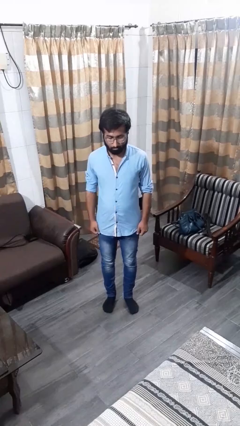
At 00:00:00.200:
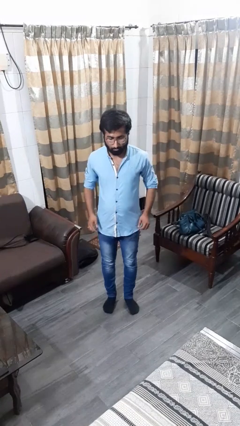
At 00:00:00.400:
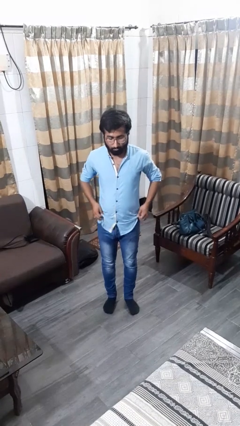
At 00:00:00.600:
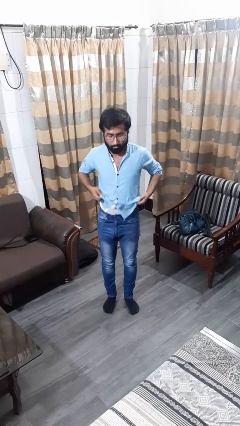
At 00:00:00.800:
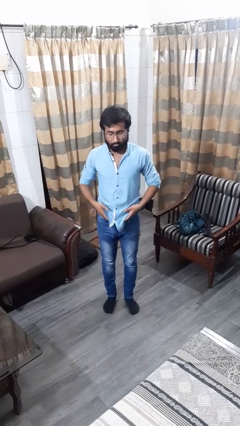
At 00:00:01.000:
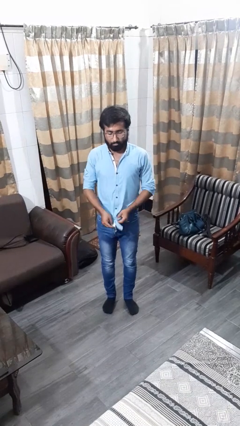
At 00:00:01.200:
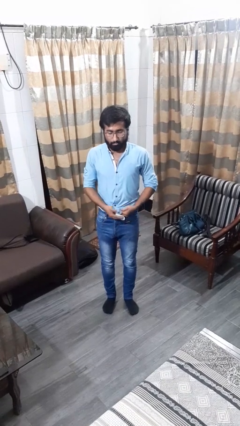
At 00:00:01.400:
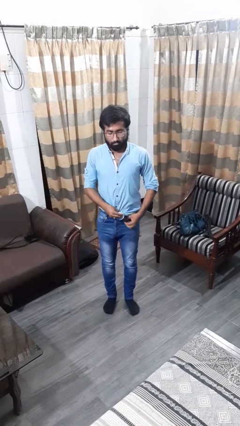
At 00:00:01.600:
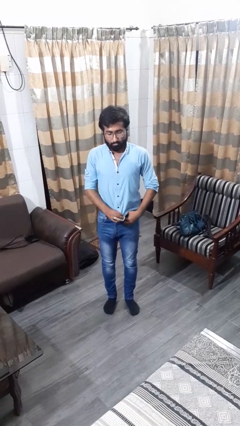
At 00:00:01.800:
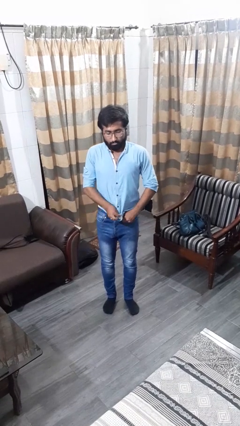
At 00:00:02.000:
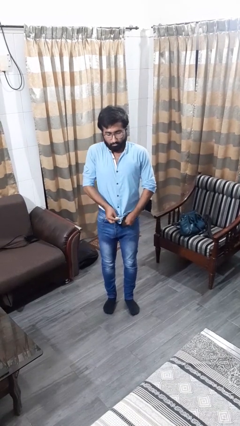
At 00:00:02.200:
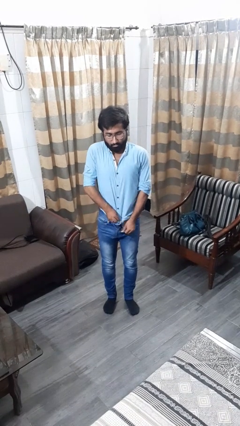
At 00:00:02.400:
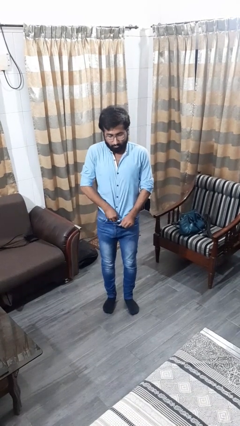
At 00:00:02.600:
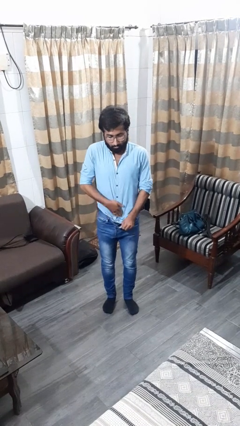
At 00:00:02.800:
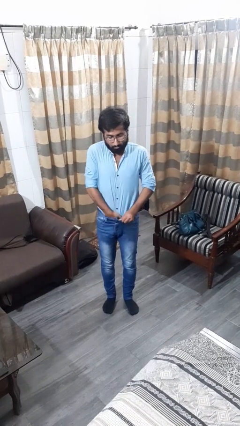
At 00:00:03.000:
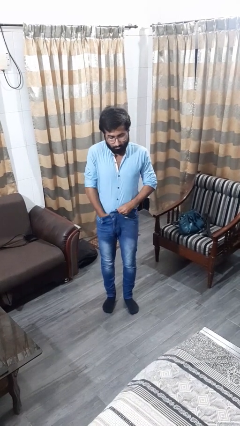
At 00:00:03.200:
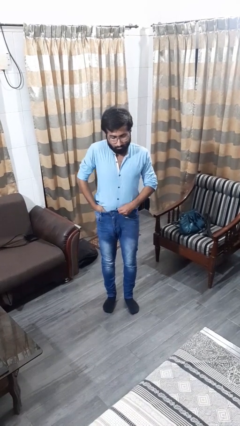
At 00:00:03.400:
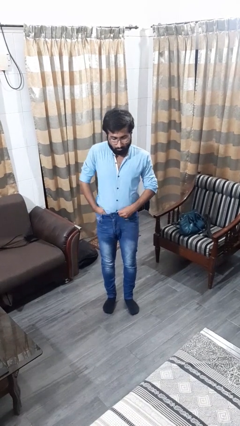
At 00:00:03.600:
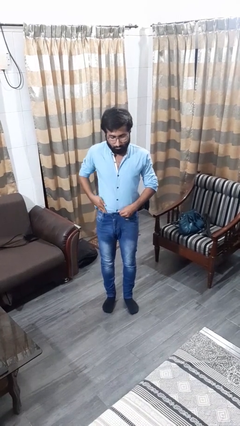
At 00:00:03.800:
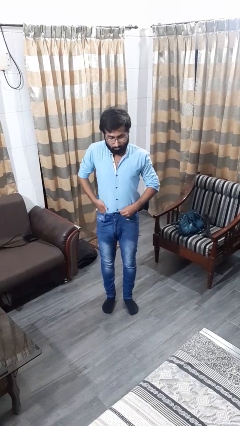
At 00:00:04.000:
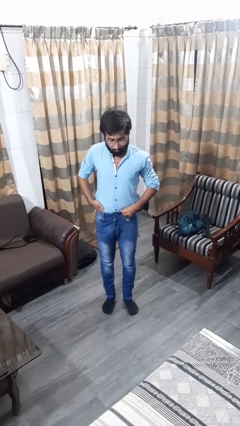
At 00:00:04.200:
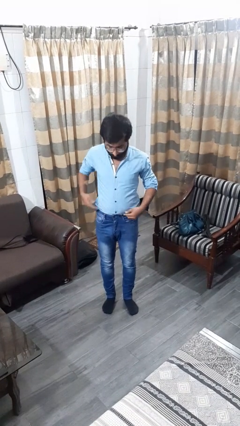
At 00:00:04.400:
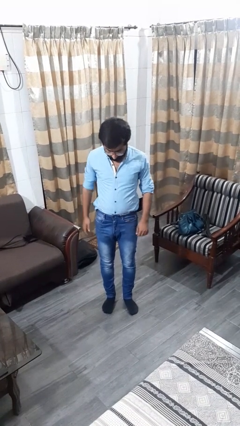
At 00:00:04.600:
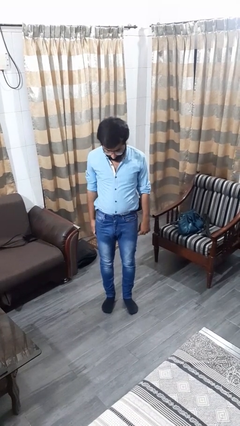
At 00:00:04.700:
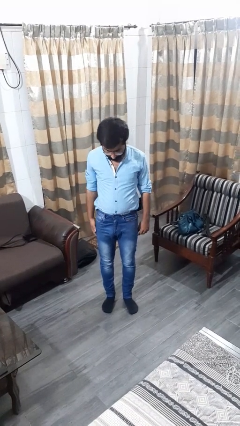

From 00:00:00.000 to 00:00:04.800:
person tucks in shirt

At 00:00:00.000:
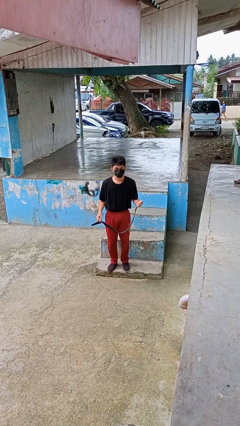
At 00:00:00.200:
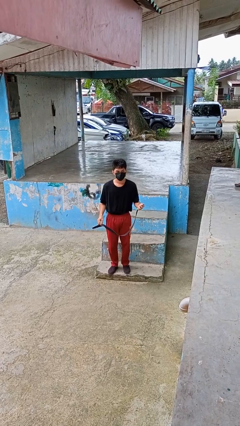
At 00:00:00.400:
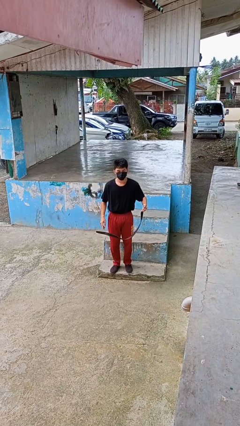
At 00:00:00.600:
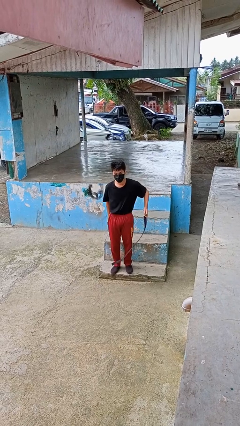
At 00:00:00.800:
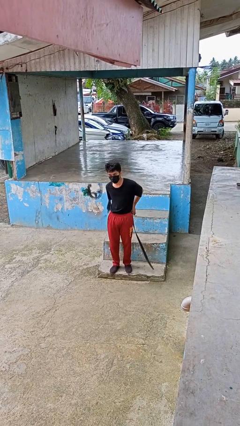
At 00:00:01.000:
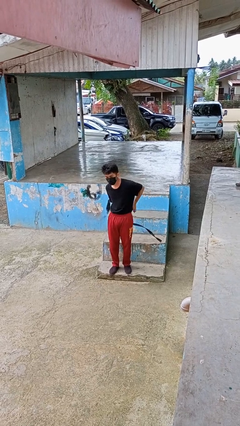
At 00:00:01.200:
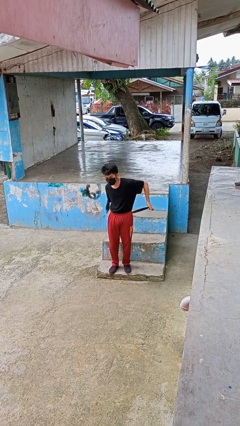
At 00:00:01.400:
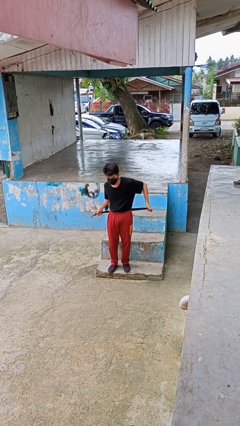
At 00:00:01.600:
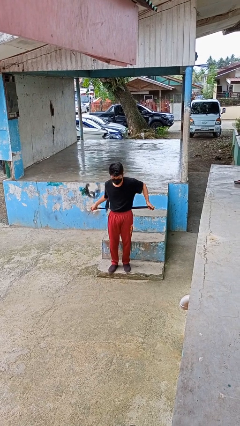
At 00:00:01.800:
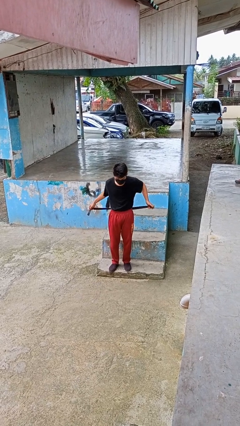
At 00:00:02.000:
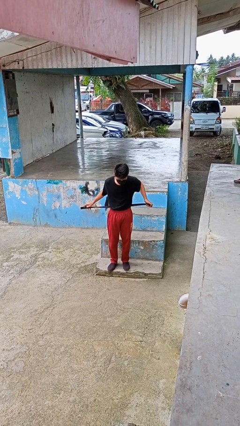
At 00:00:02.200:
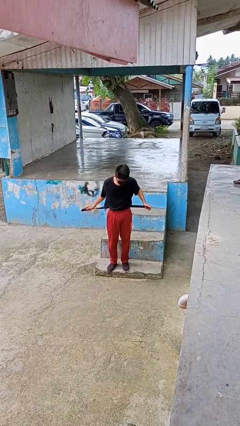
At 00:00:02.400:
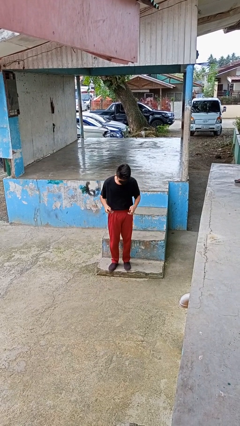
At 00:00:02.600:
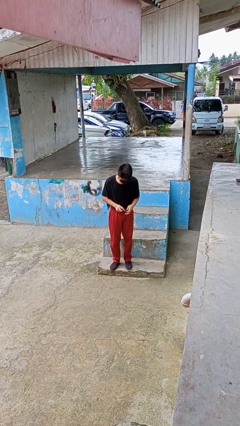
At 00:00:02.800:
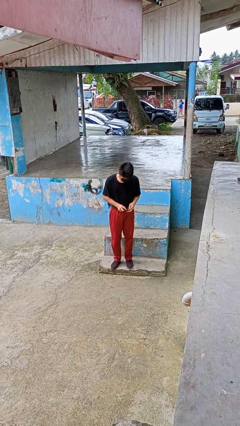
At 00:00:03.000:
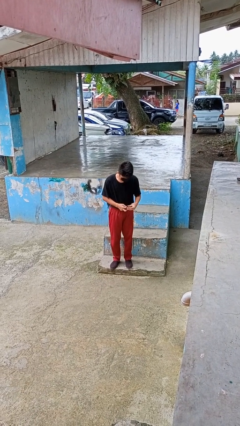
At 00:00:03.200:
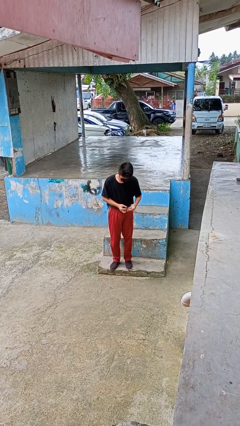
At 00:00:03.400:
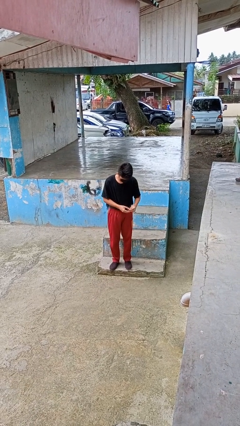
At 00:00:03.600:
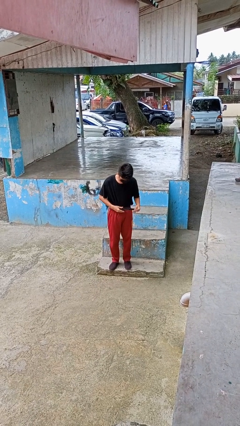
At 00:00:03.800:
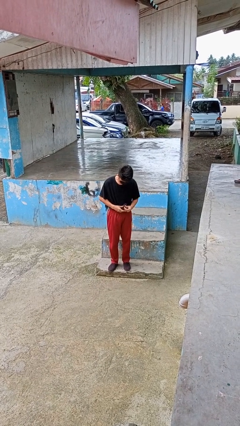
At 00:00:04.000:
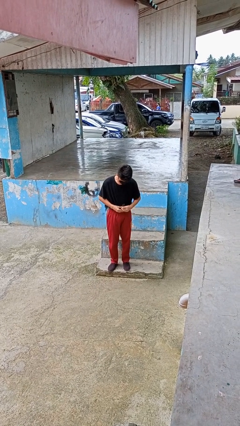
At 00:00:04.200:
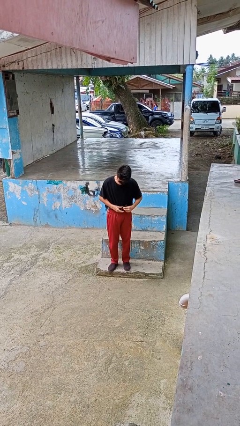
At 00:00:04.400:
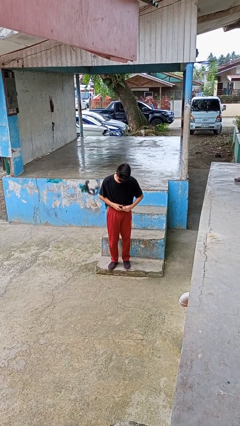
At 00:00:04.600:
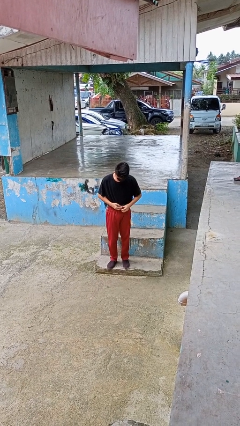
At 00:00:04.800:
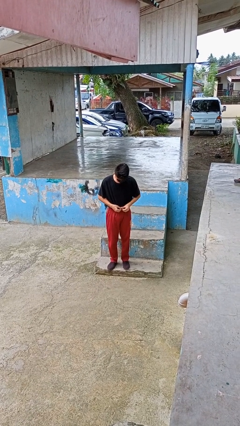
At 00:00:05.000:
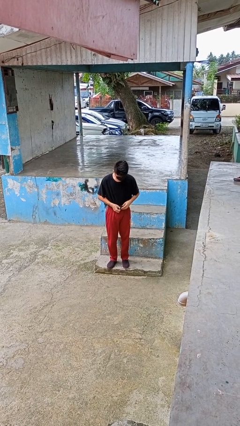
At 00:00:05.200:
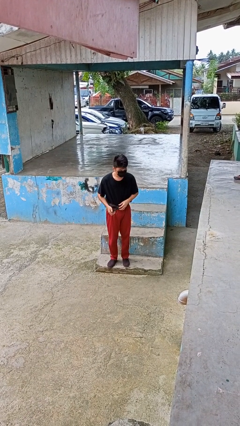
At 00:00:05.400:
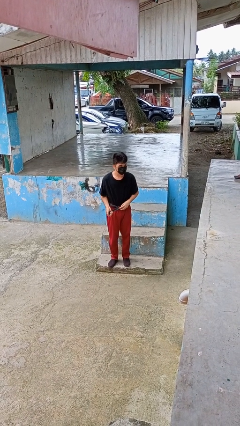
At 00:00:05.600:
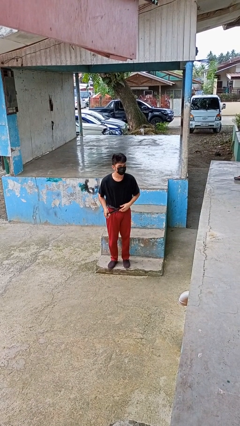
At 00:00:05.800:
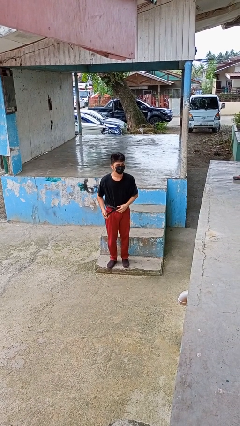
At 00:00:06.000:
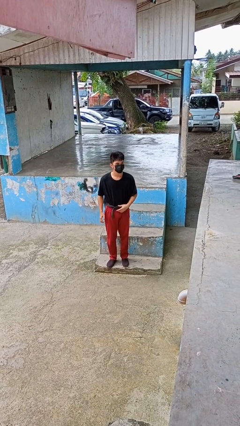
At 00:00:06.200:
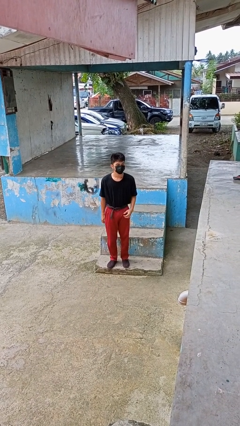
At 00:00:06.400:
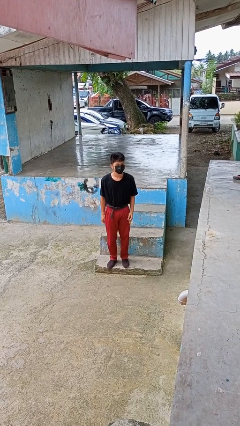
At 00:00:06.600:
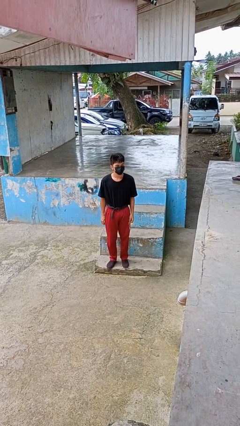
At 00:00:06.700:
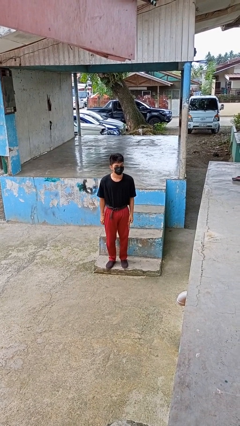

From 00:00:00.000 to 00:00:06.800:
person puts on belt

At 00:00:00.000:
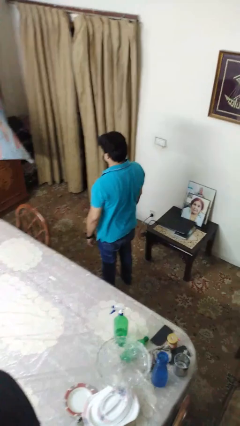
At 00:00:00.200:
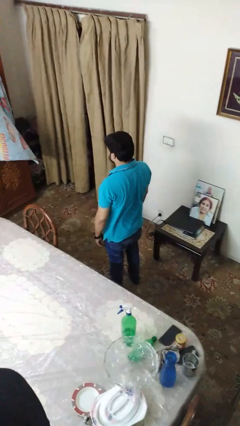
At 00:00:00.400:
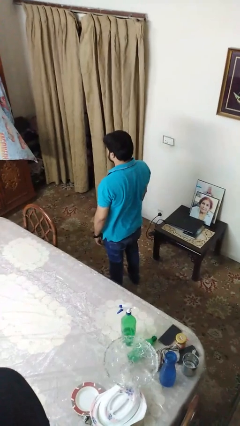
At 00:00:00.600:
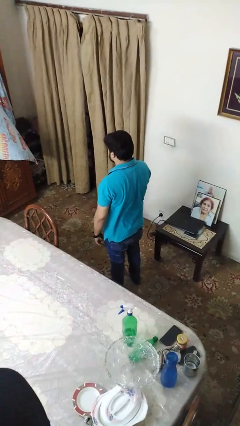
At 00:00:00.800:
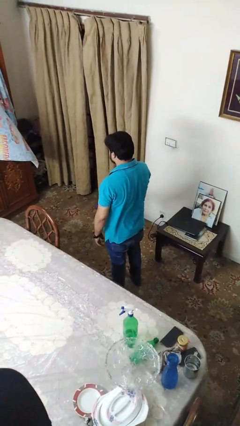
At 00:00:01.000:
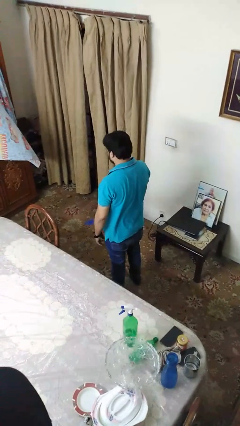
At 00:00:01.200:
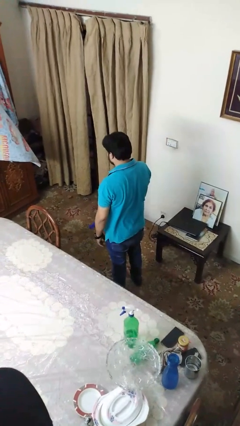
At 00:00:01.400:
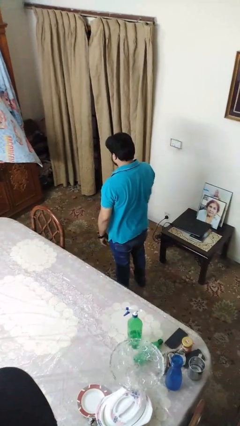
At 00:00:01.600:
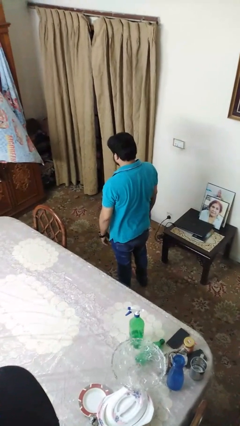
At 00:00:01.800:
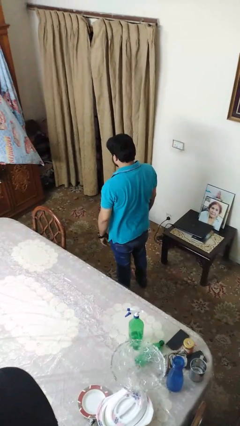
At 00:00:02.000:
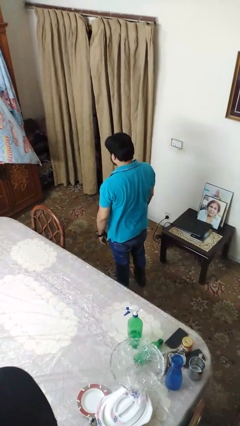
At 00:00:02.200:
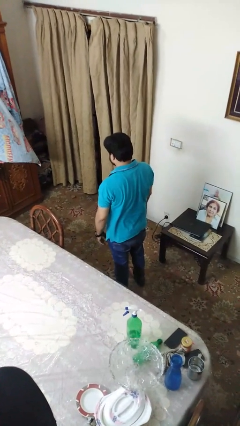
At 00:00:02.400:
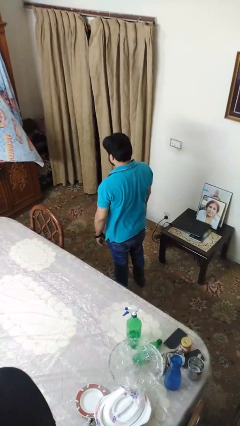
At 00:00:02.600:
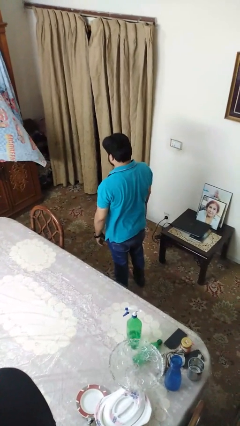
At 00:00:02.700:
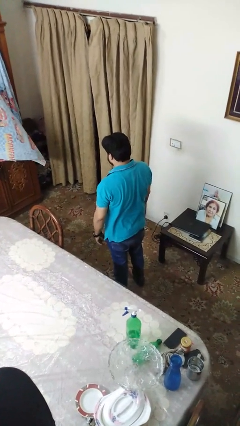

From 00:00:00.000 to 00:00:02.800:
person throws object to ground

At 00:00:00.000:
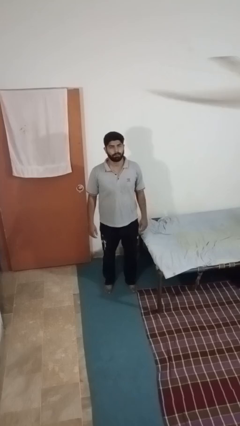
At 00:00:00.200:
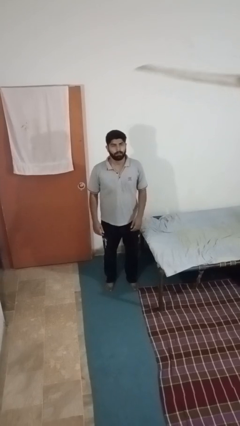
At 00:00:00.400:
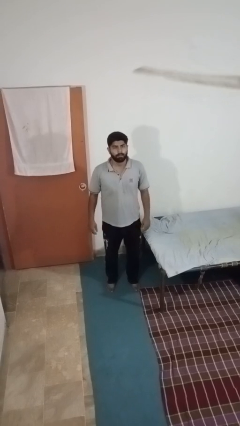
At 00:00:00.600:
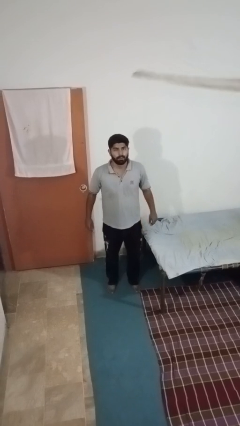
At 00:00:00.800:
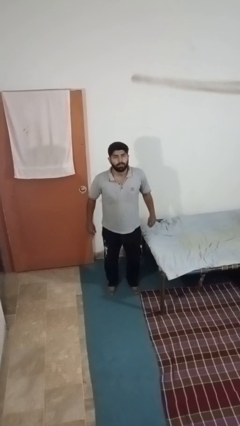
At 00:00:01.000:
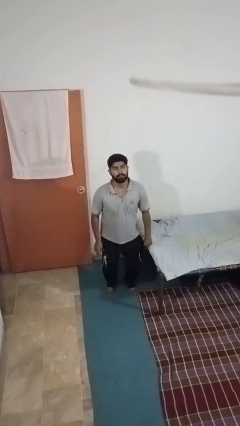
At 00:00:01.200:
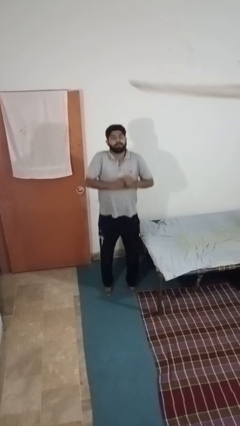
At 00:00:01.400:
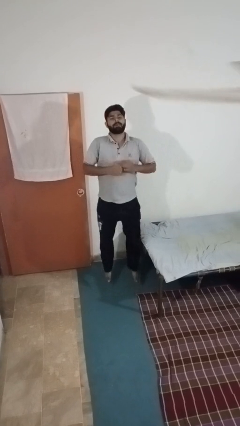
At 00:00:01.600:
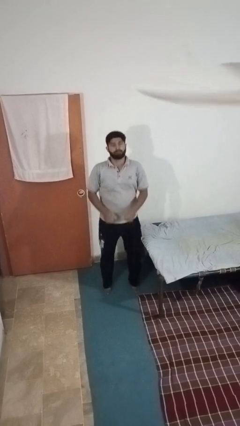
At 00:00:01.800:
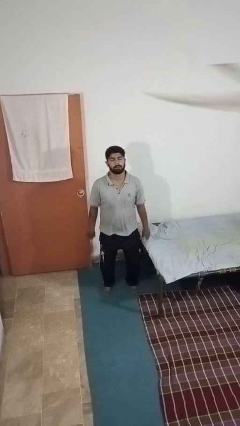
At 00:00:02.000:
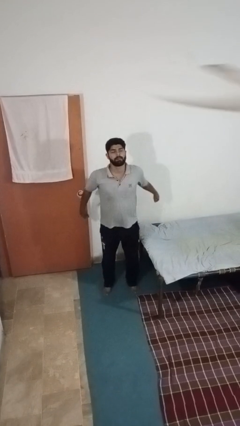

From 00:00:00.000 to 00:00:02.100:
person jumps

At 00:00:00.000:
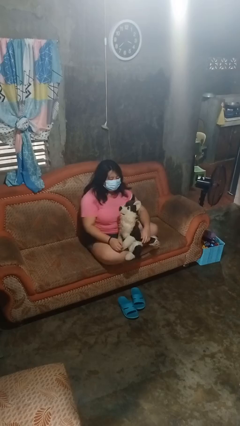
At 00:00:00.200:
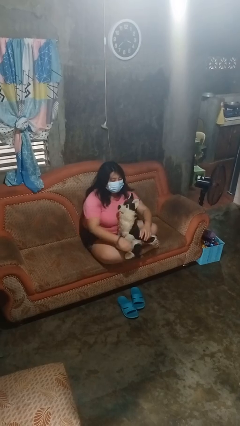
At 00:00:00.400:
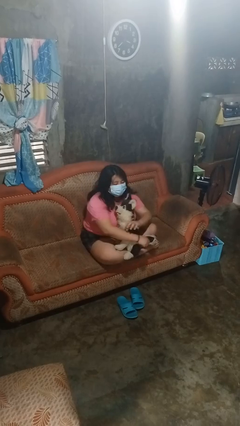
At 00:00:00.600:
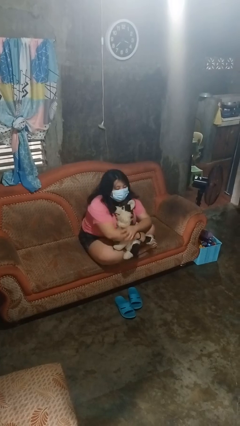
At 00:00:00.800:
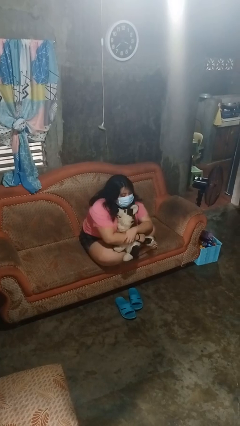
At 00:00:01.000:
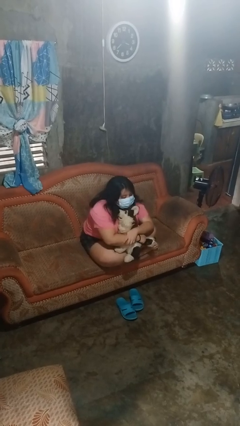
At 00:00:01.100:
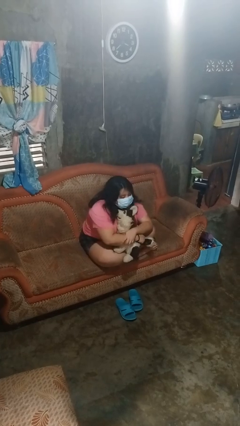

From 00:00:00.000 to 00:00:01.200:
person hugs stuffed animal
